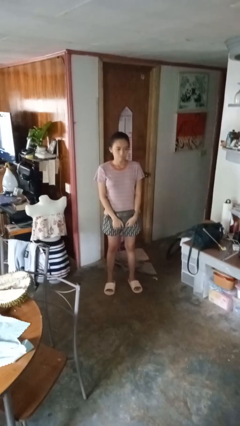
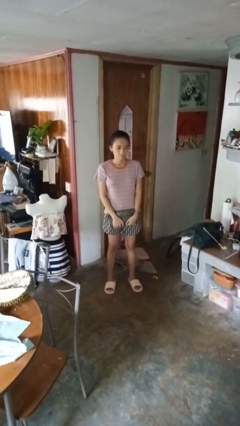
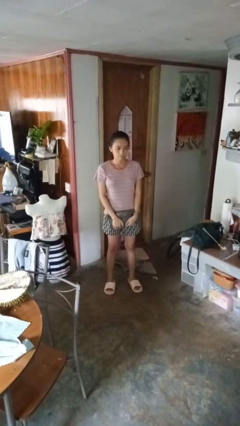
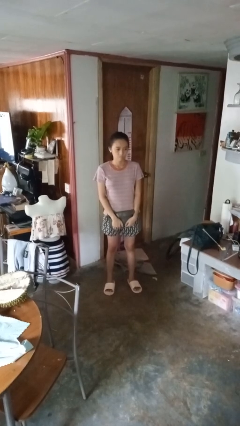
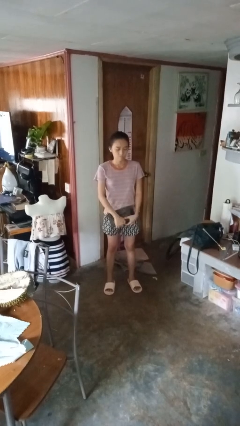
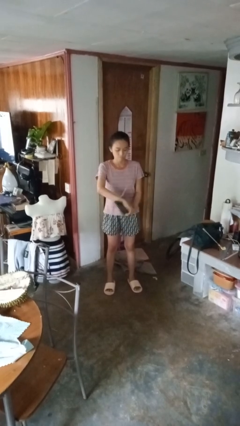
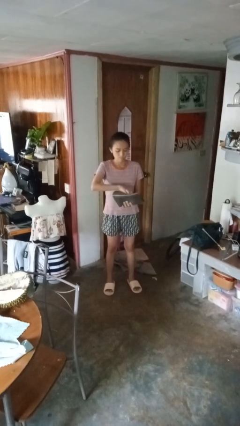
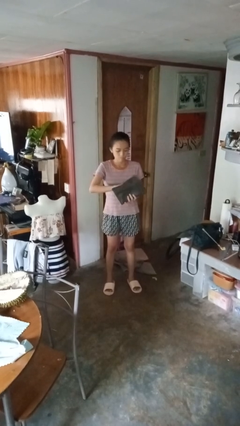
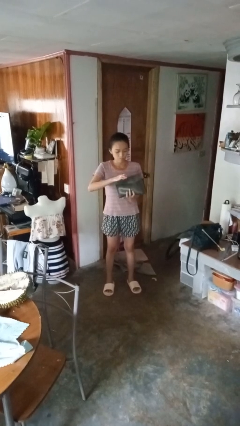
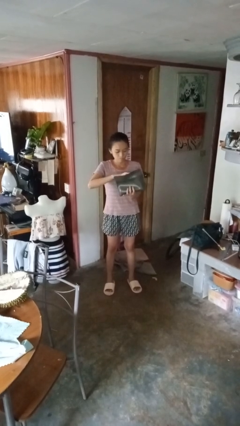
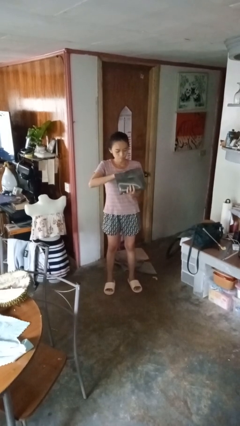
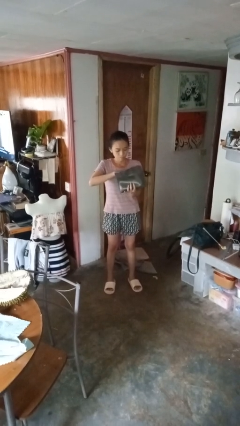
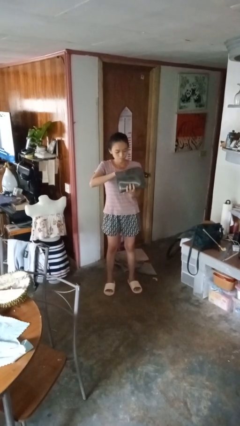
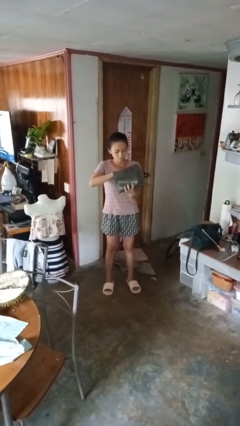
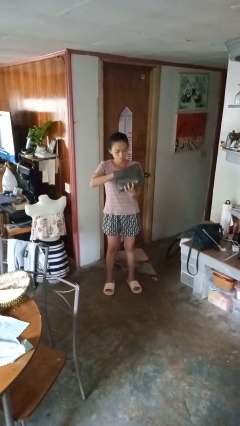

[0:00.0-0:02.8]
person searches in purse

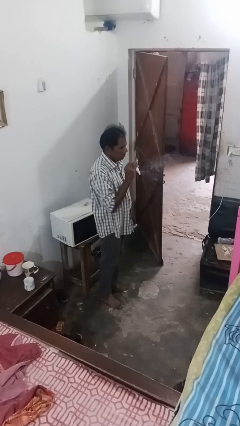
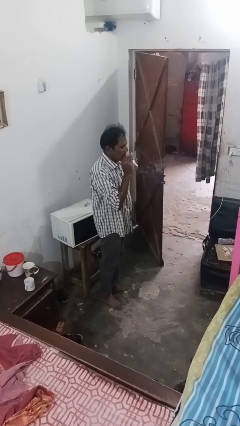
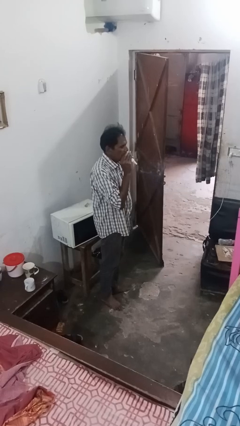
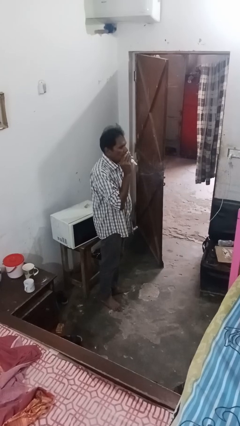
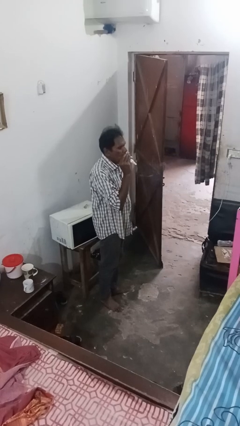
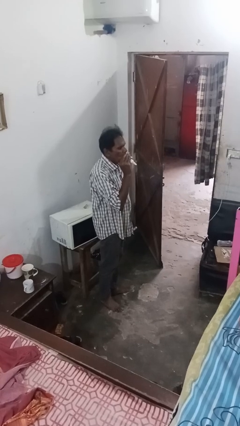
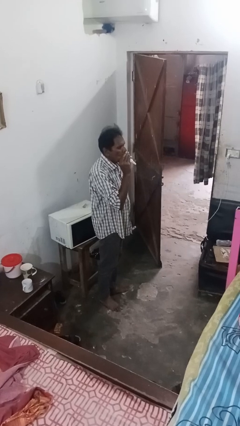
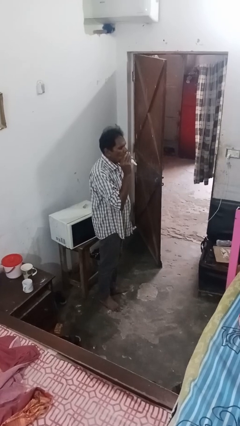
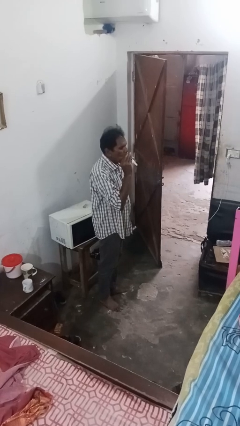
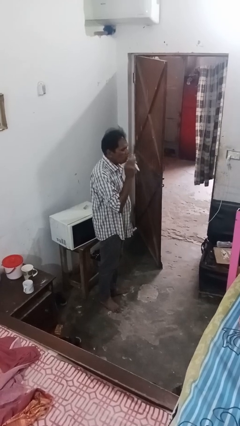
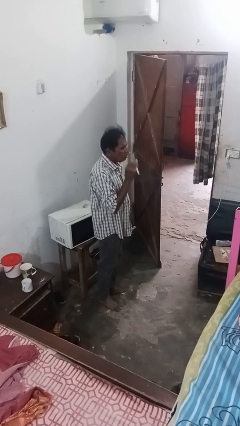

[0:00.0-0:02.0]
person vapes

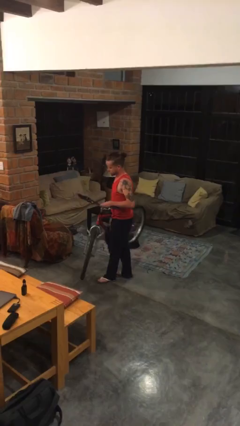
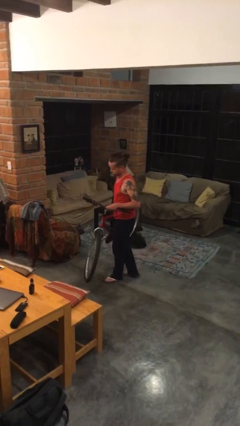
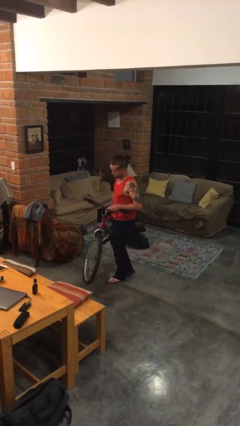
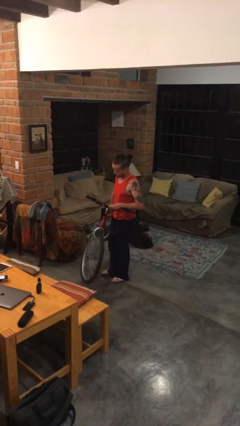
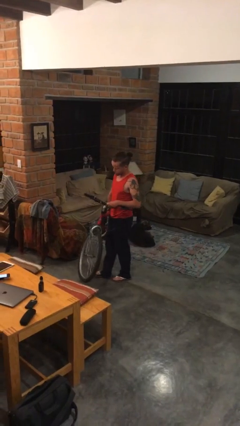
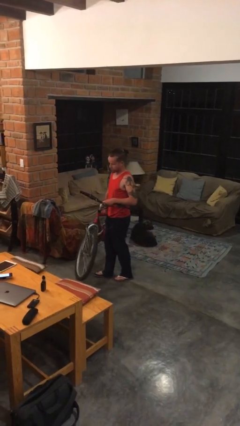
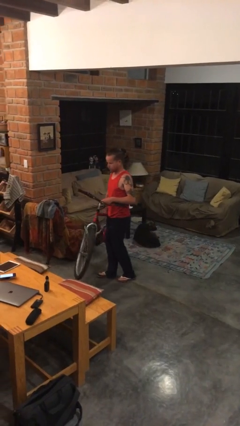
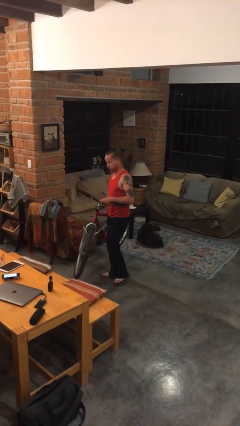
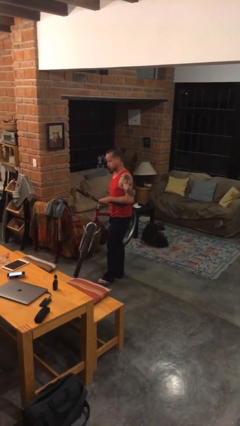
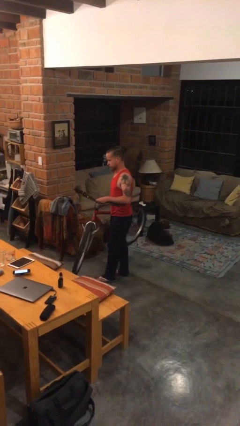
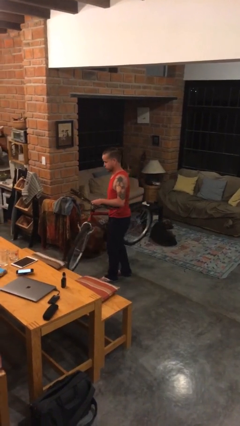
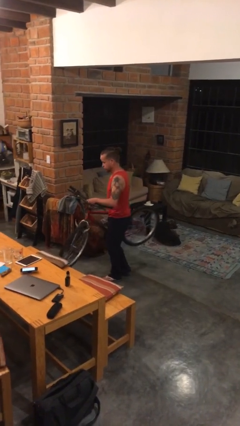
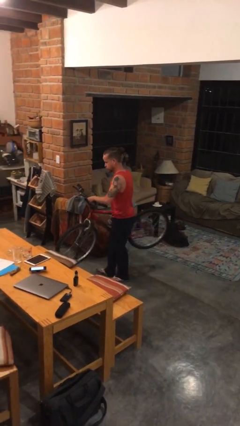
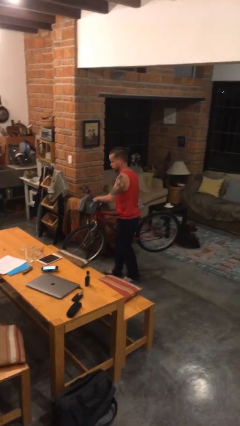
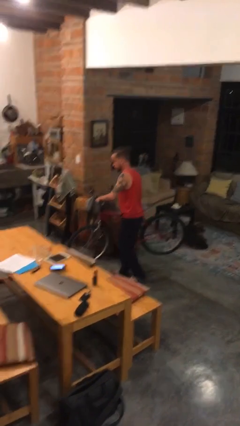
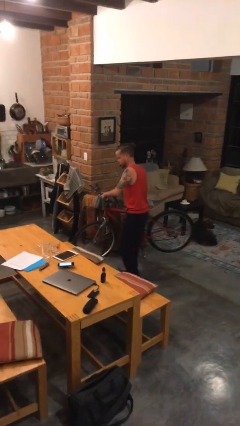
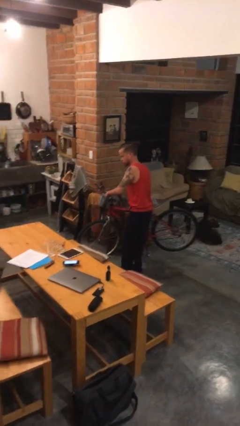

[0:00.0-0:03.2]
person carries bicycle

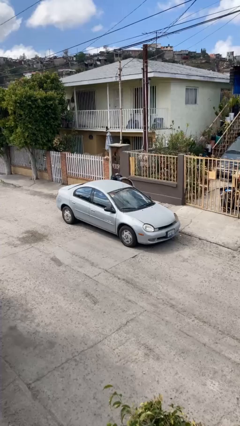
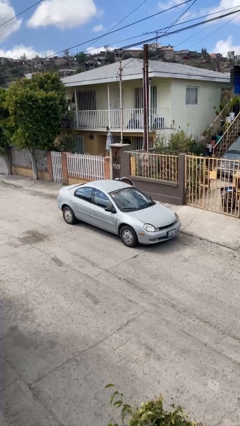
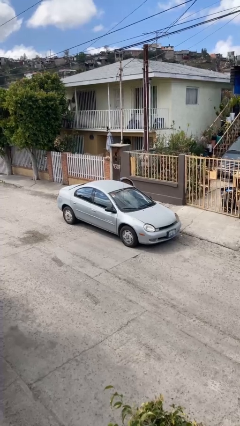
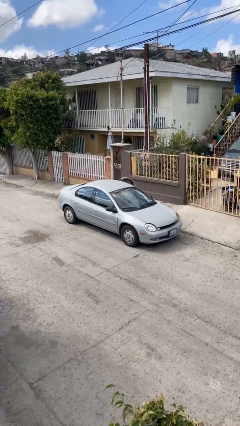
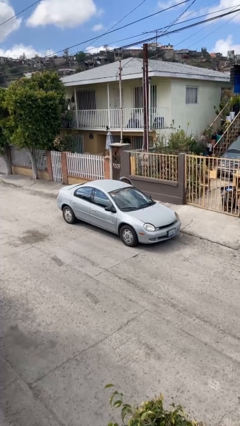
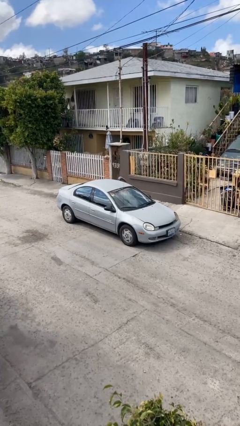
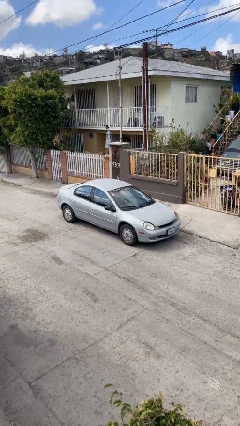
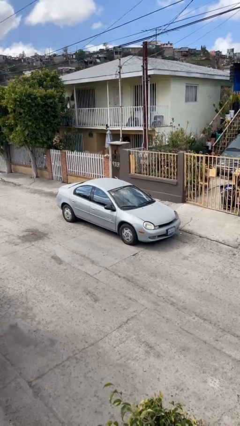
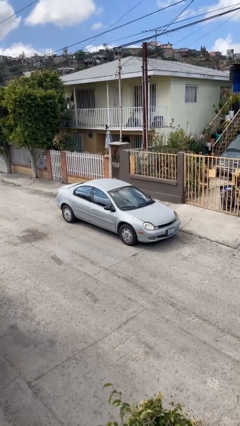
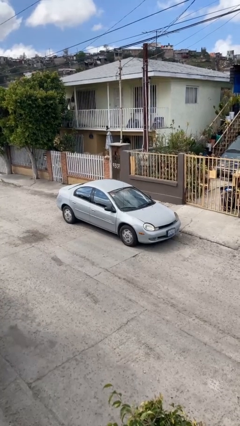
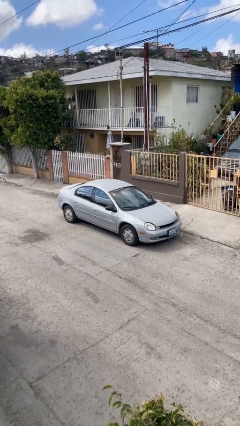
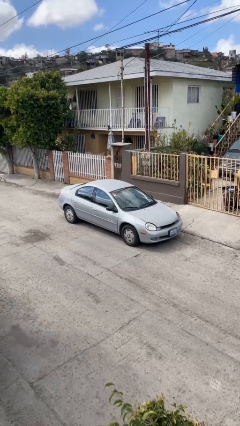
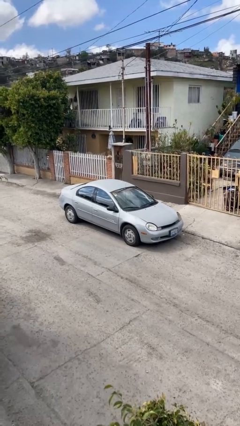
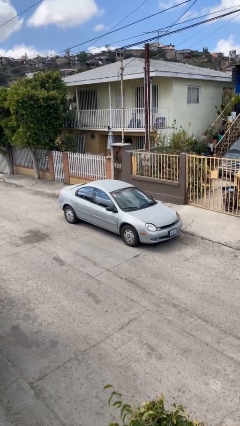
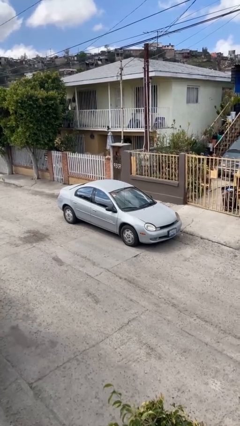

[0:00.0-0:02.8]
car picks up person

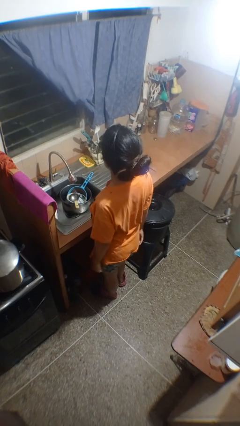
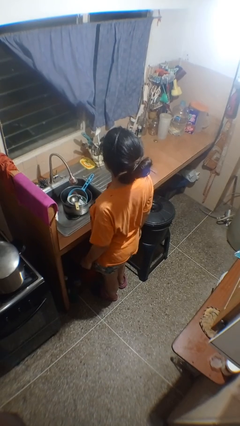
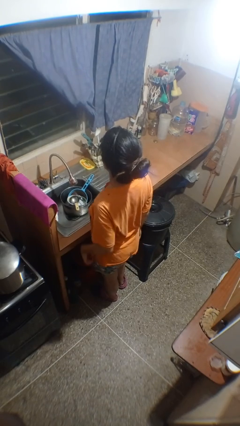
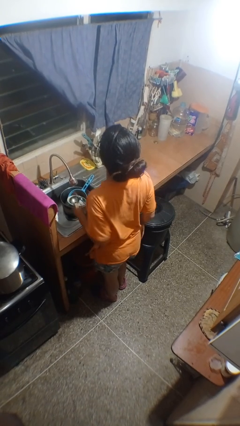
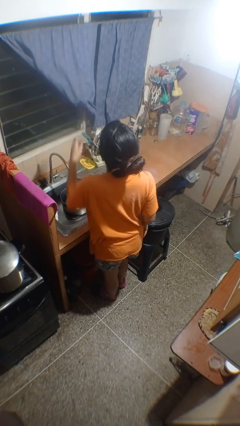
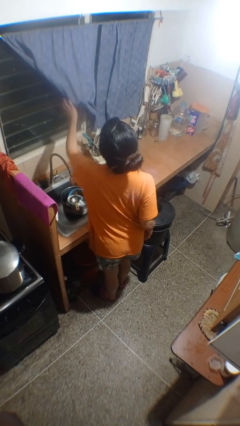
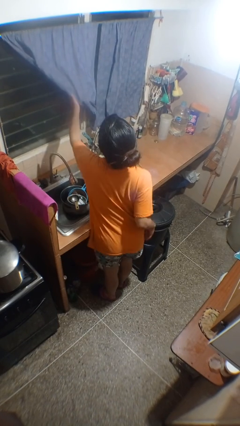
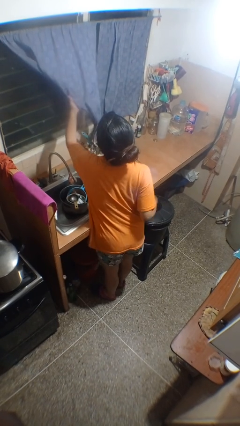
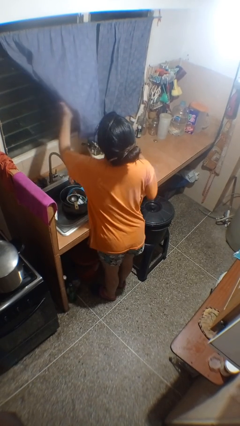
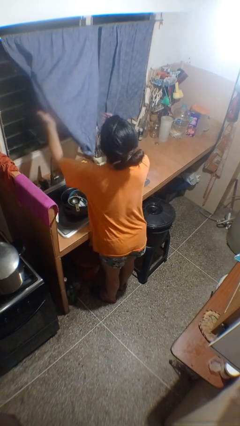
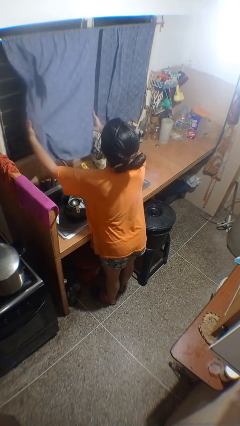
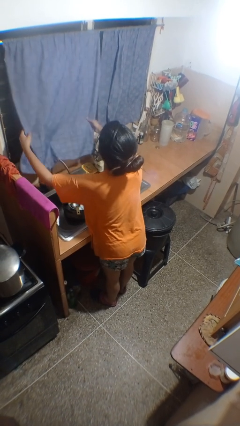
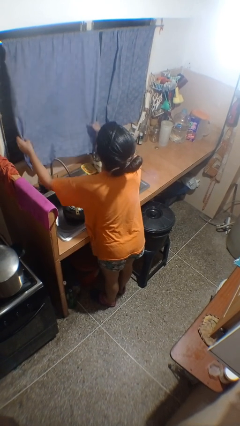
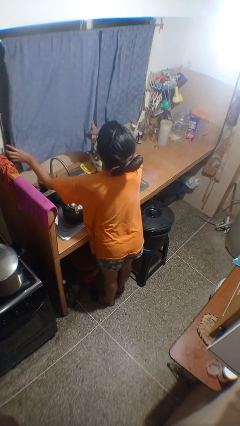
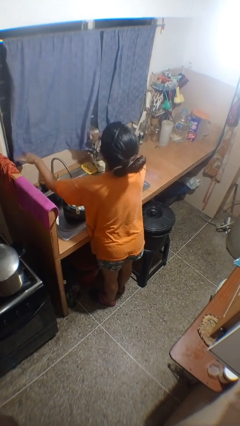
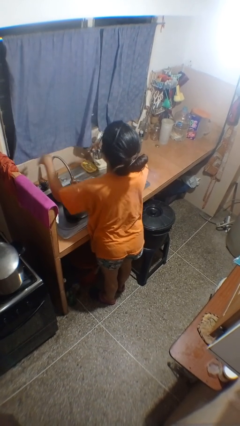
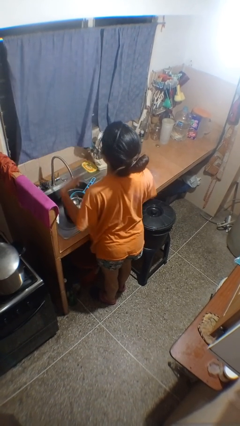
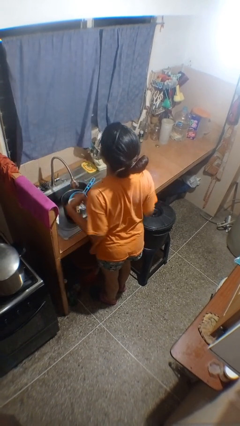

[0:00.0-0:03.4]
person closes curtains

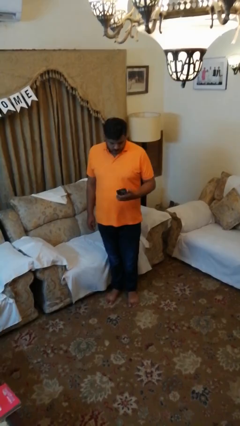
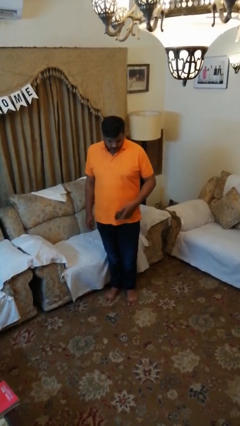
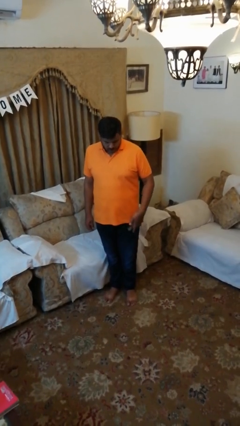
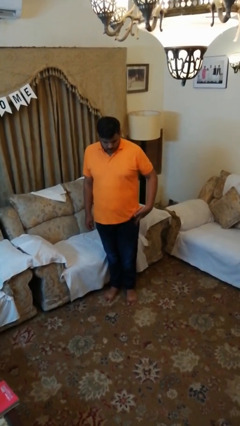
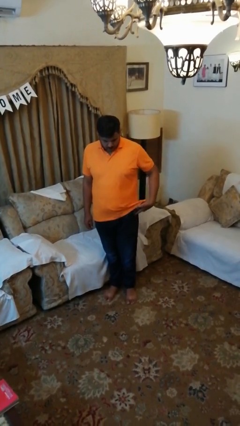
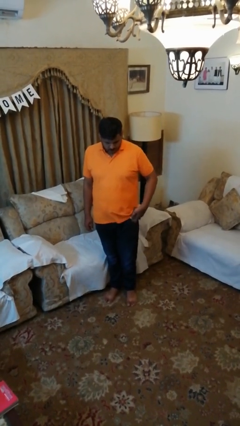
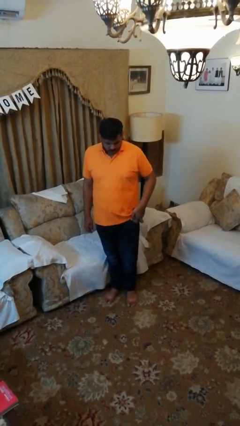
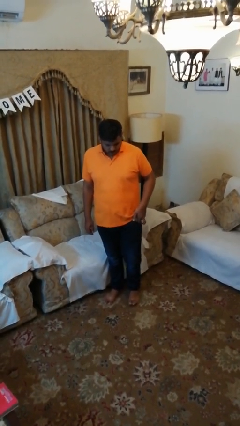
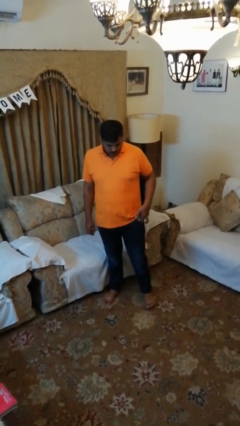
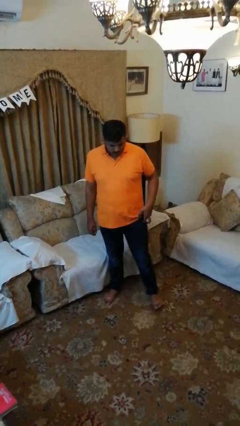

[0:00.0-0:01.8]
person puts phone into pocket

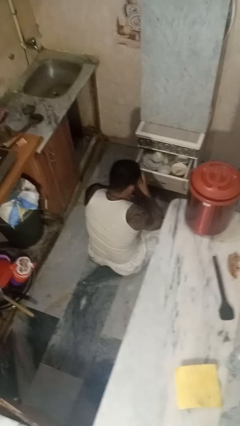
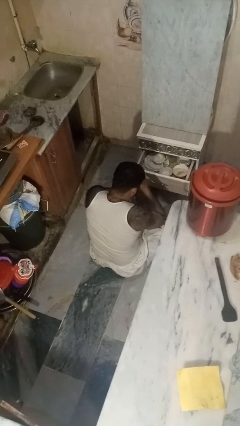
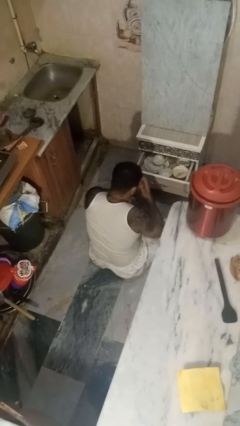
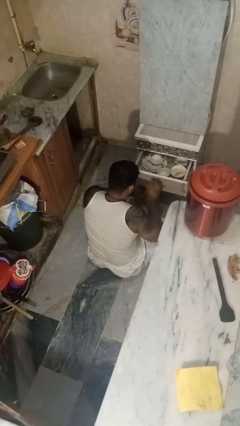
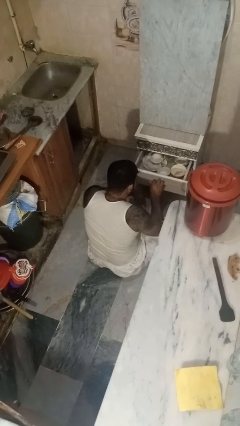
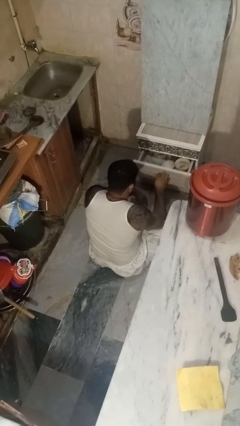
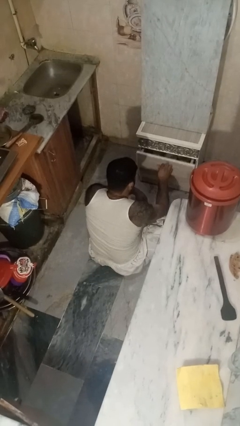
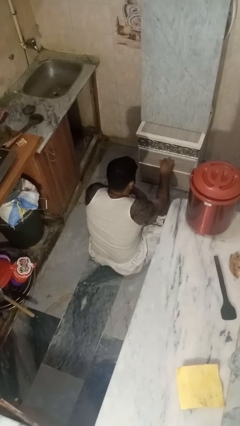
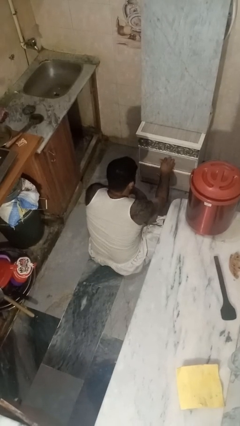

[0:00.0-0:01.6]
person closes kitchen drawer
